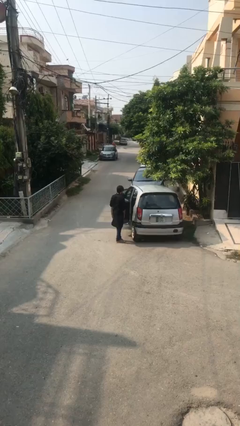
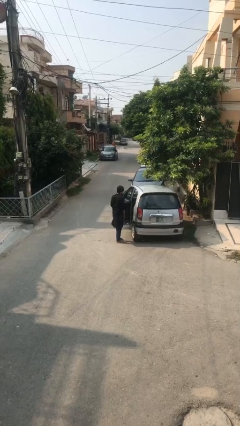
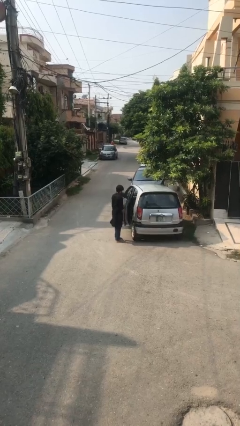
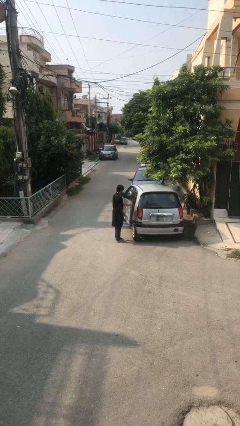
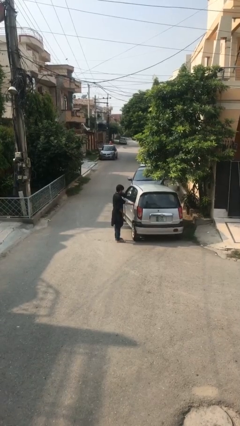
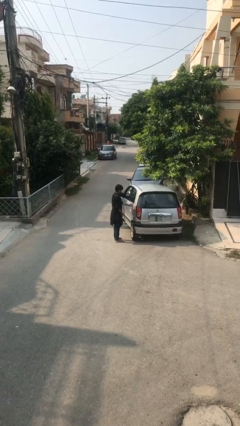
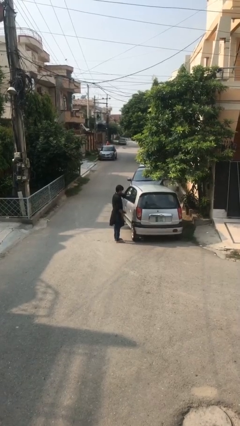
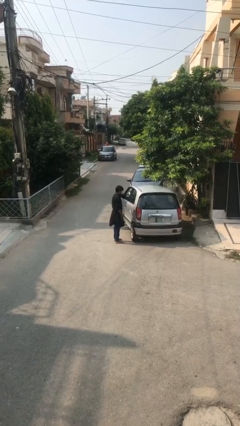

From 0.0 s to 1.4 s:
person closes car door

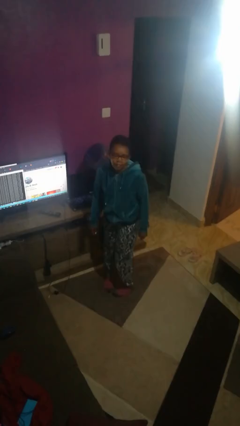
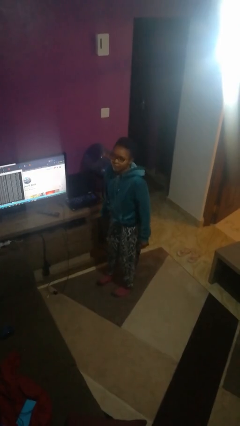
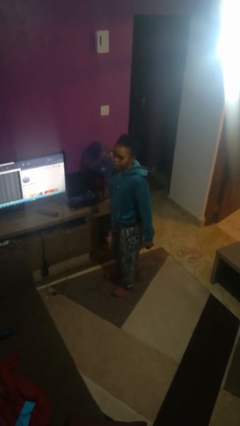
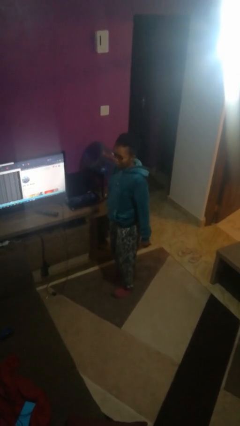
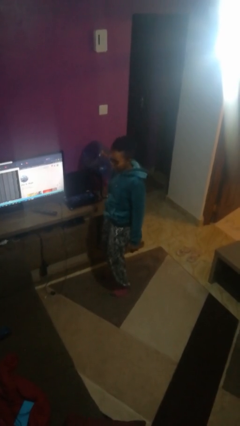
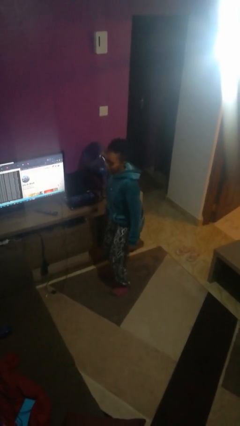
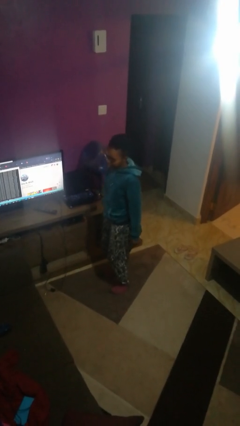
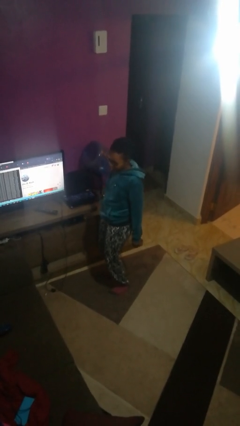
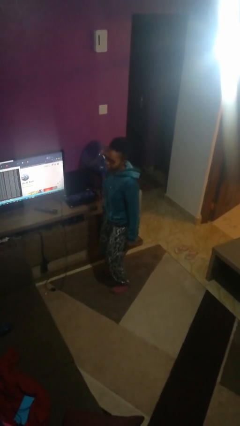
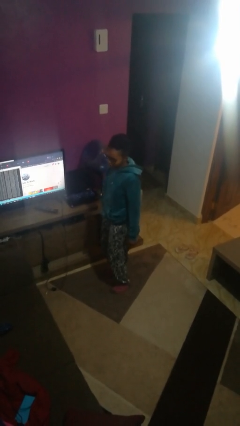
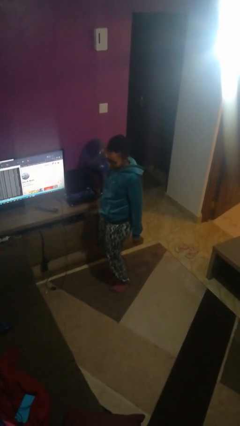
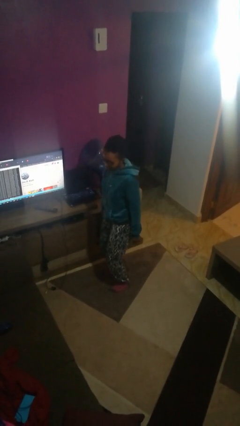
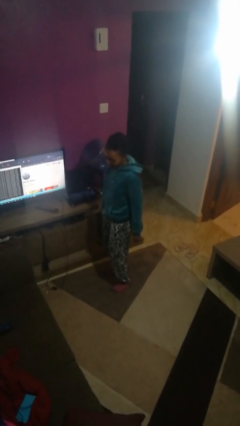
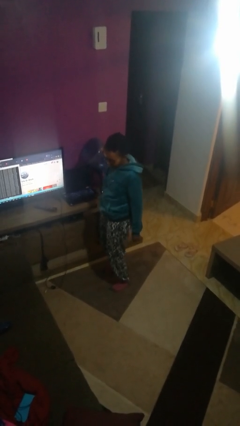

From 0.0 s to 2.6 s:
person wiggles hips

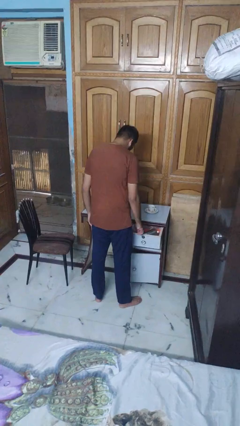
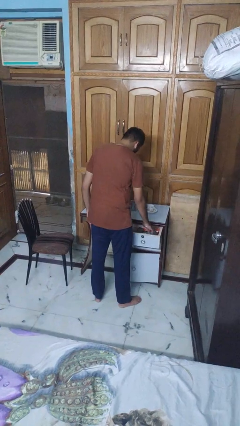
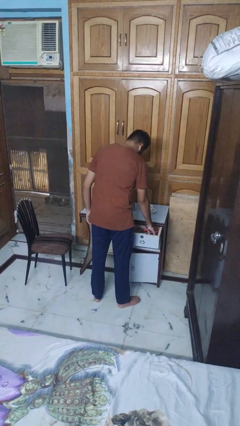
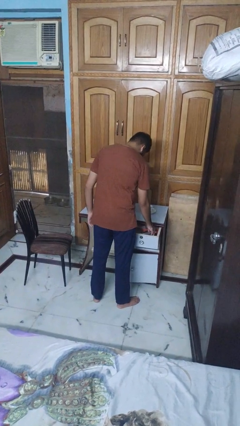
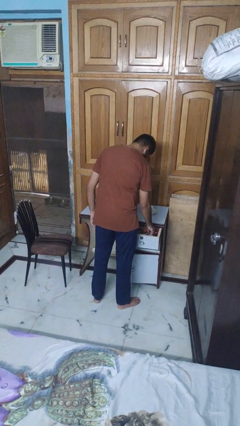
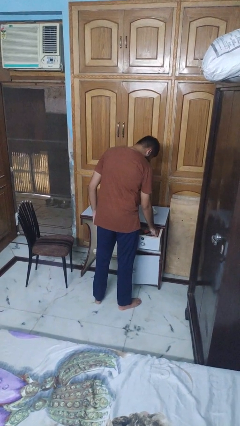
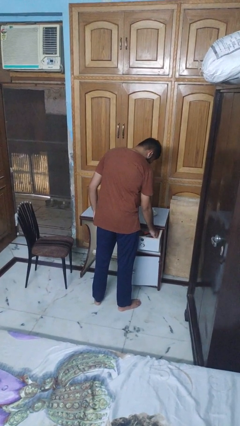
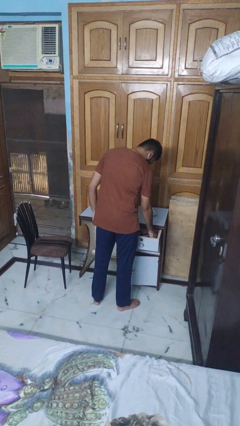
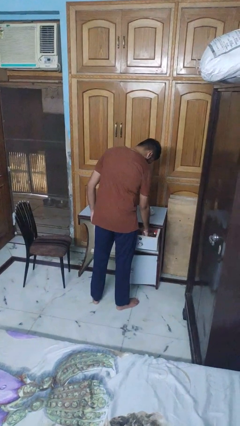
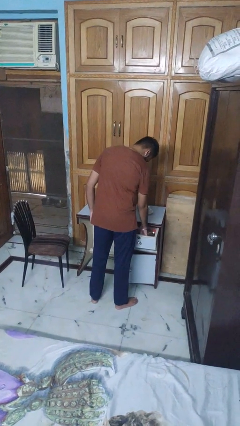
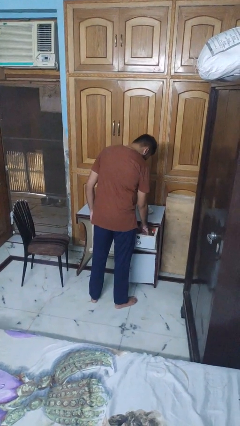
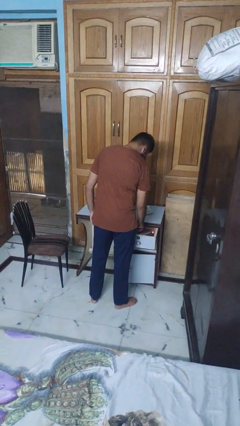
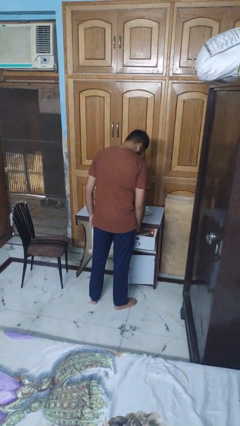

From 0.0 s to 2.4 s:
person searches in kitchen drawer

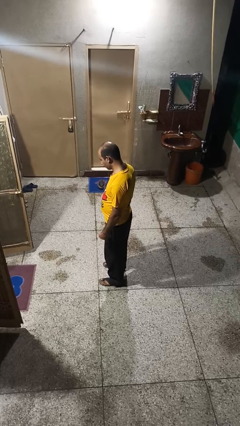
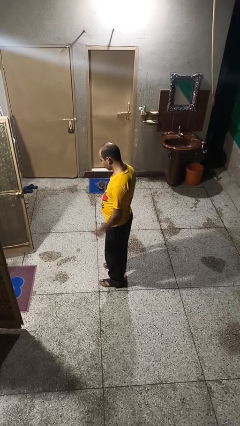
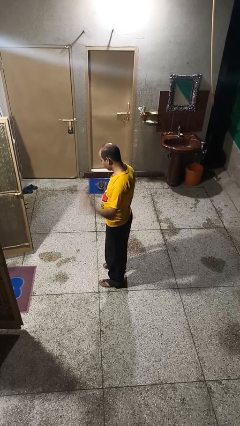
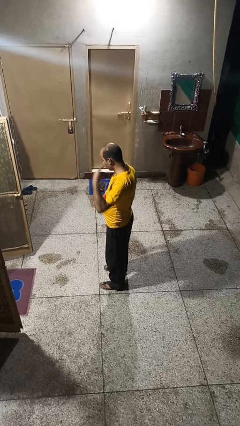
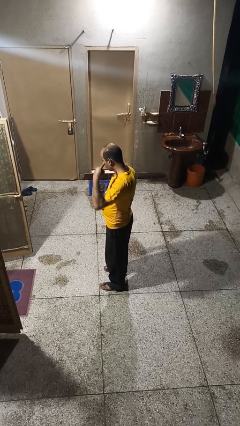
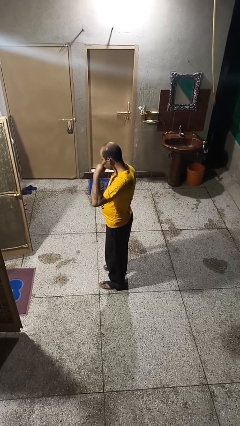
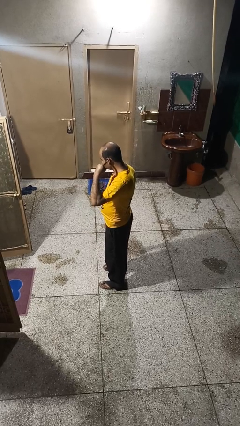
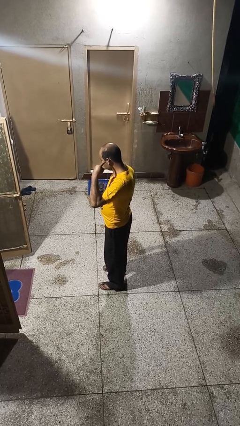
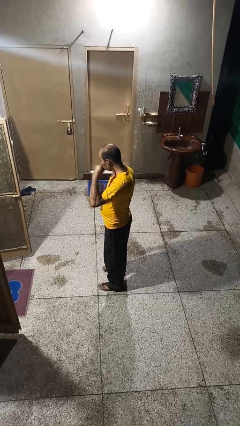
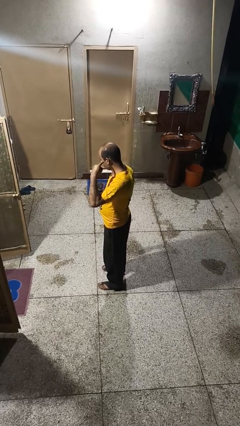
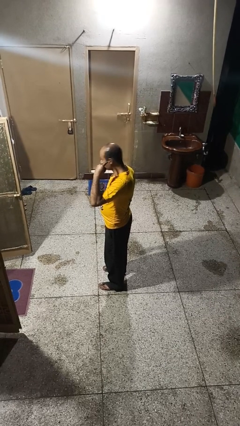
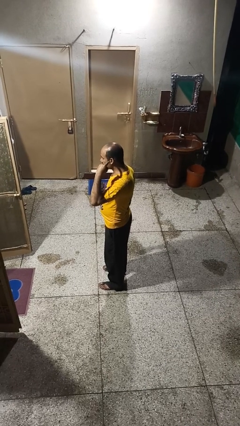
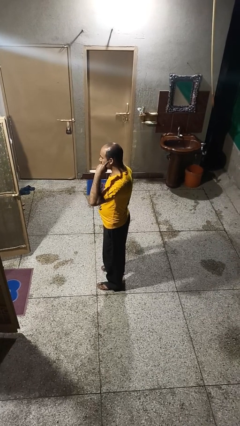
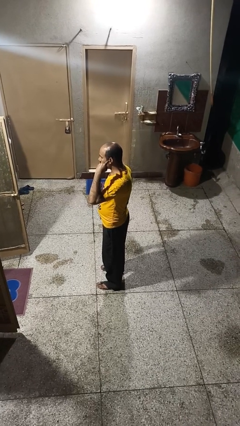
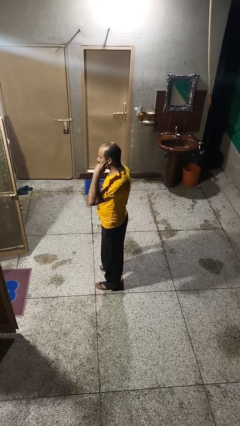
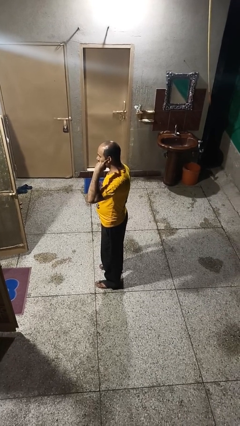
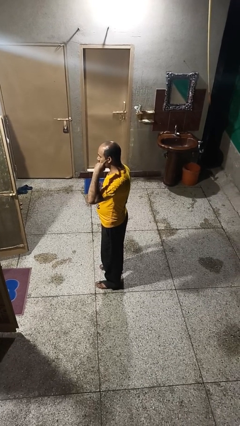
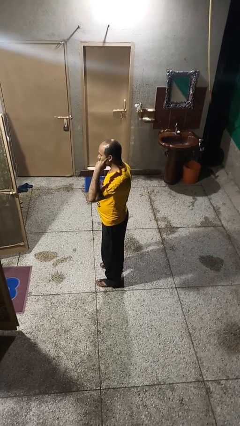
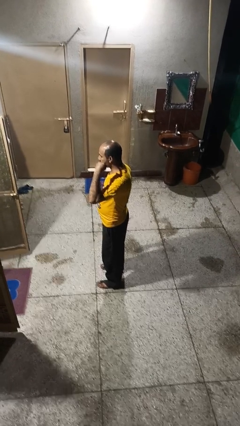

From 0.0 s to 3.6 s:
person gestures listen closely

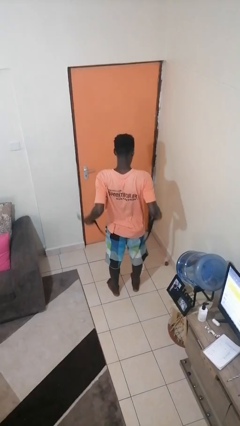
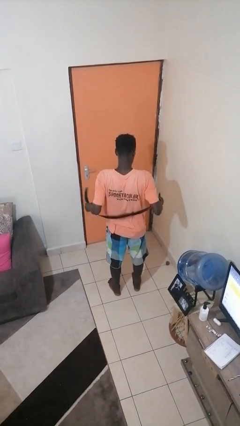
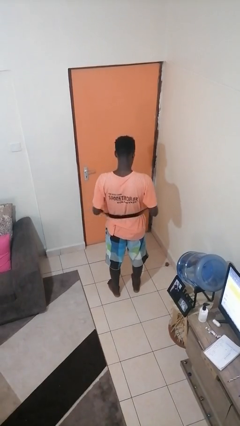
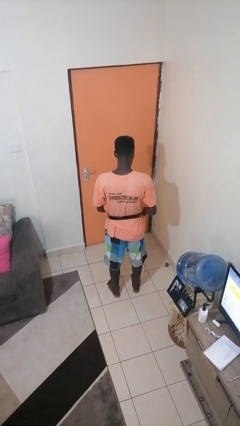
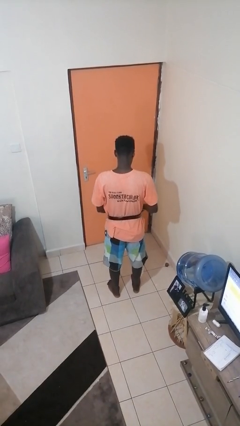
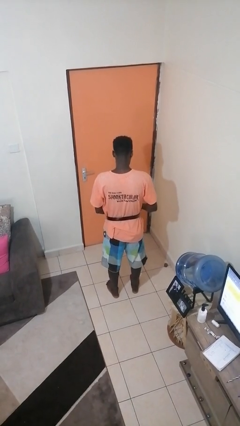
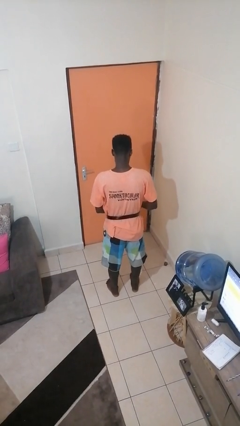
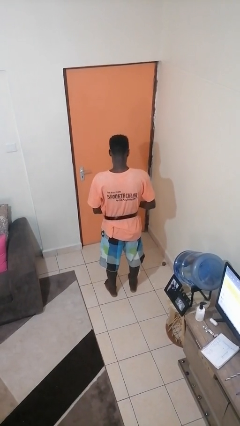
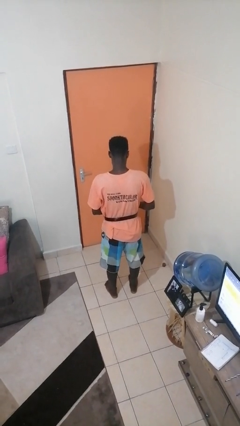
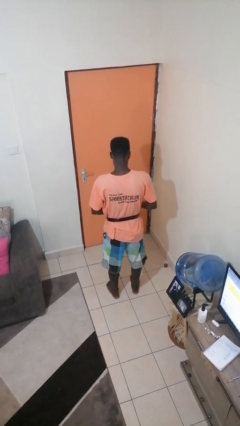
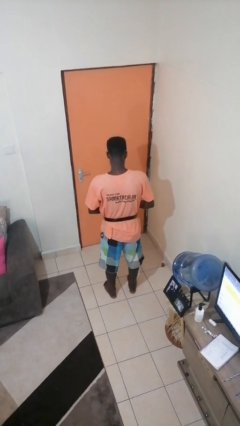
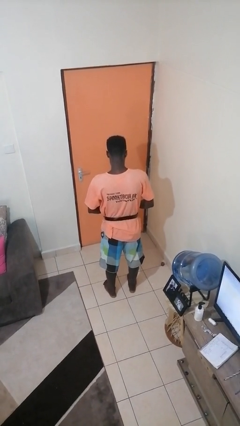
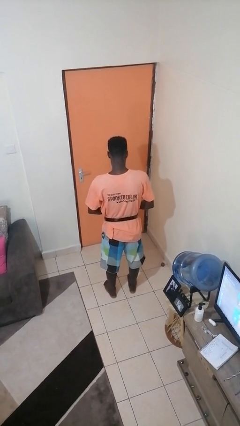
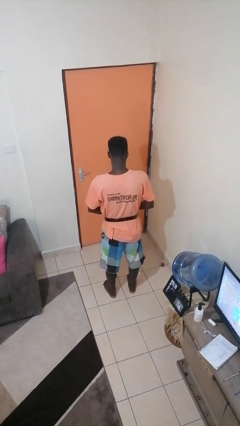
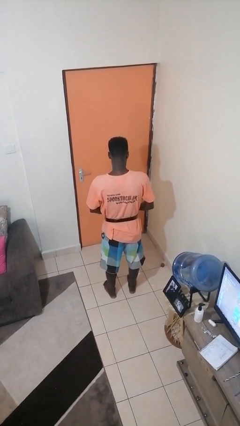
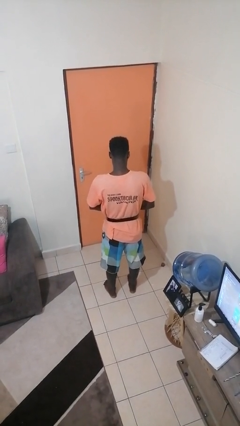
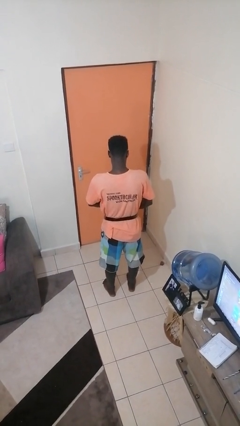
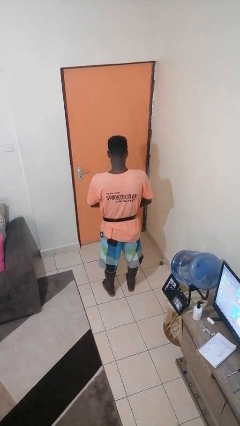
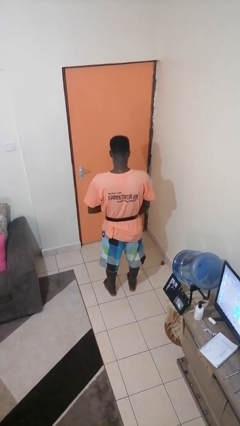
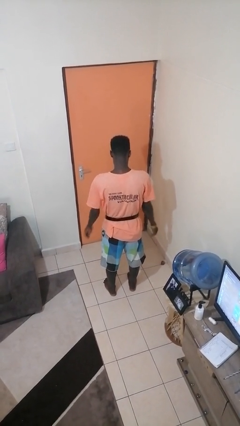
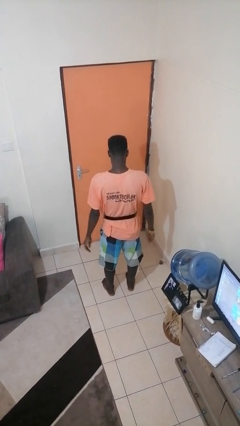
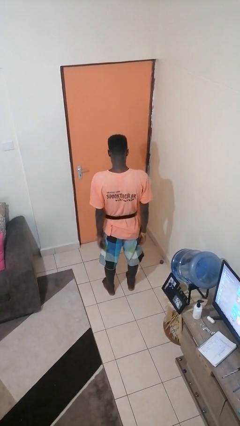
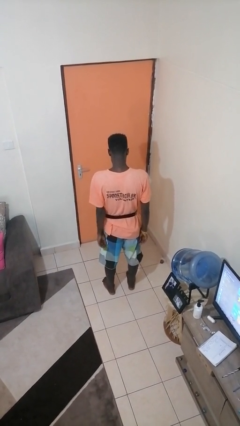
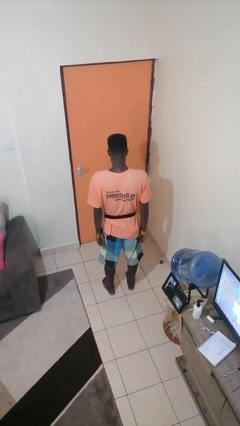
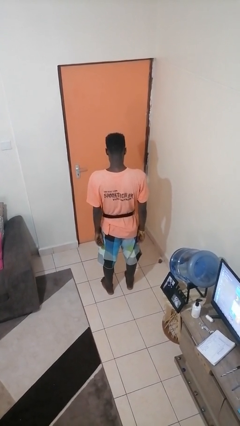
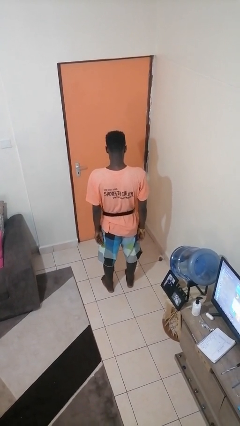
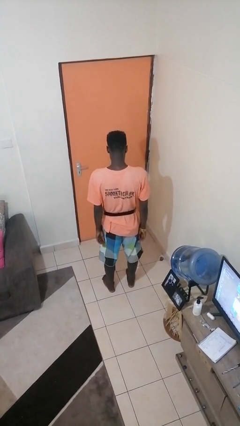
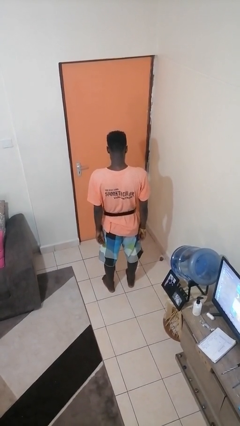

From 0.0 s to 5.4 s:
person puts on belt

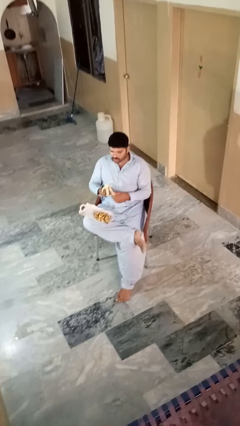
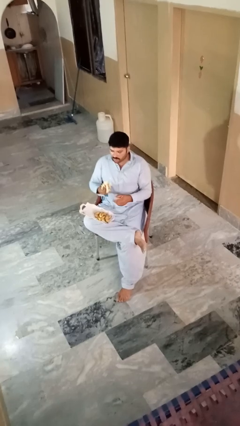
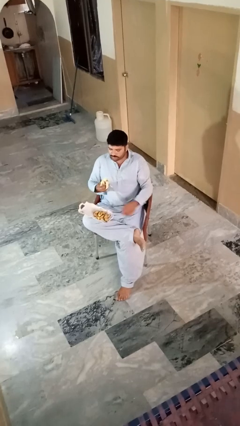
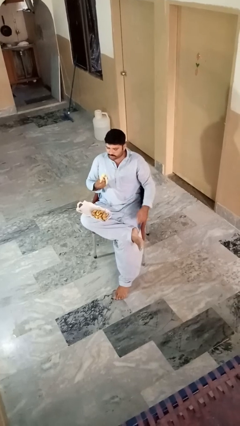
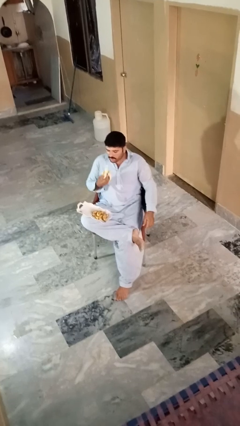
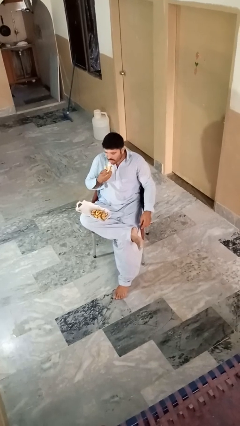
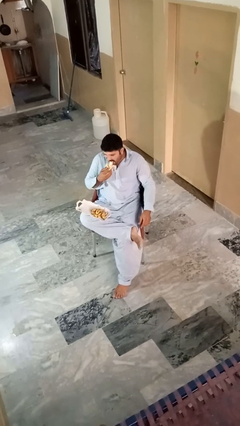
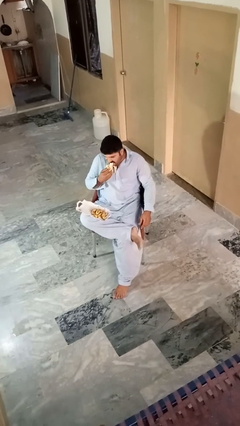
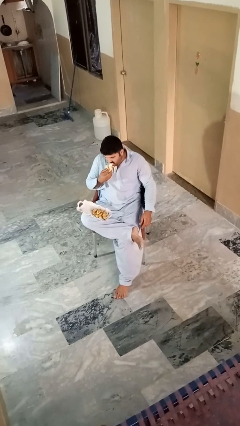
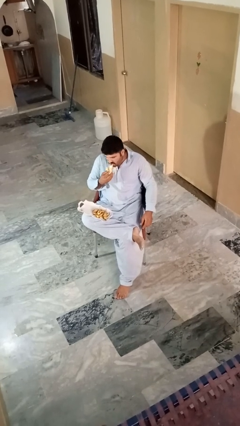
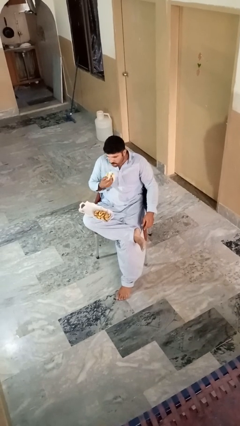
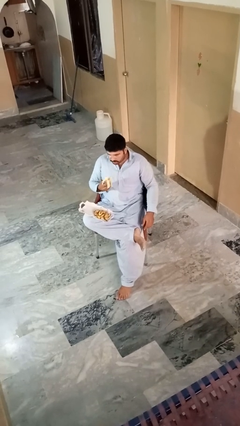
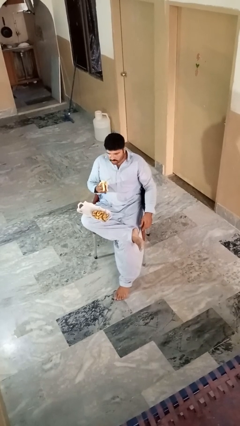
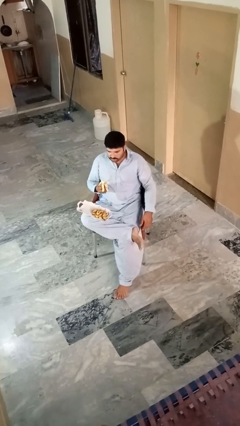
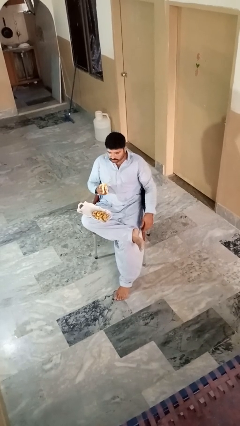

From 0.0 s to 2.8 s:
person eats banana
